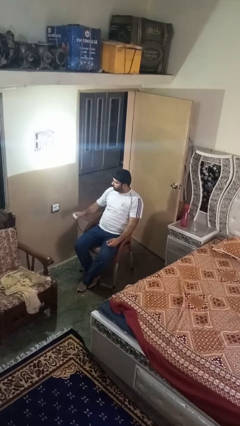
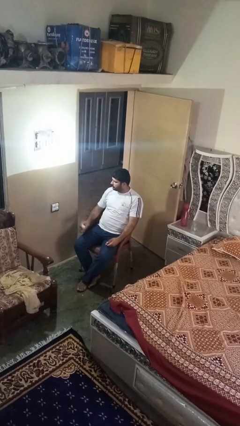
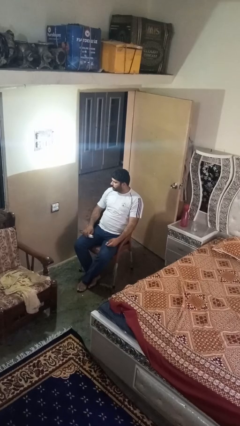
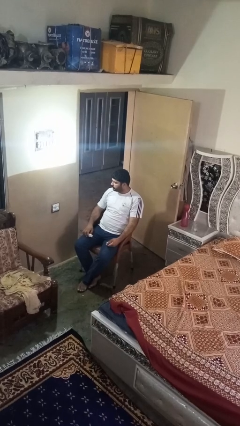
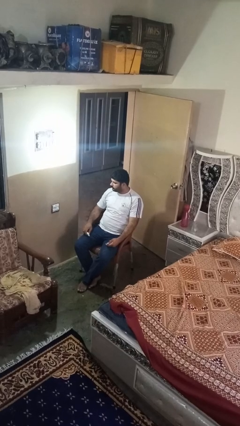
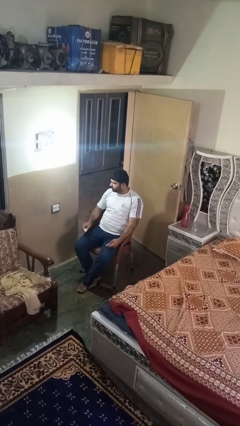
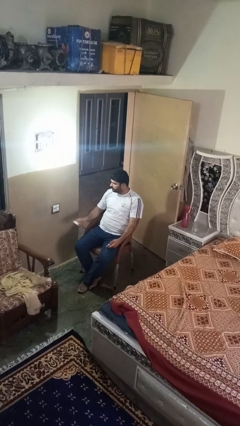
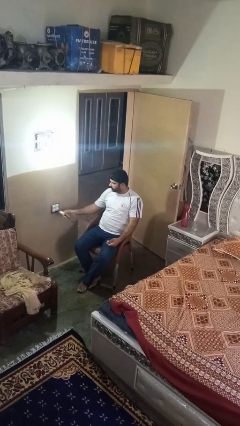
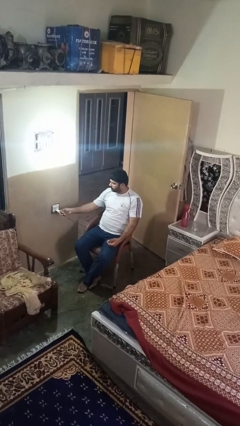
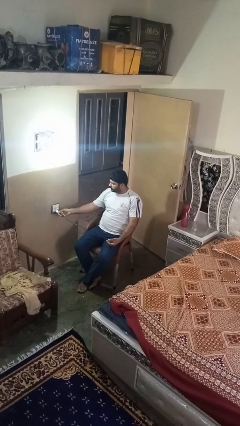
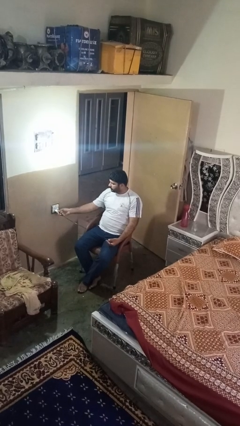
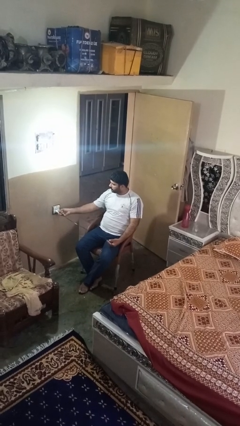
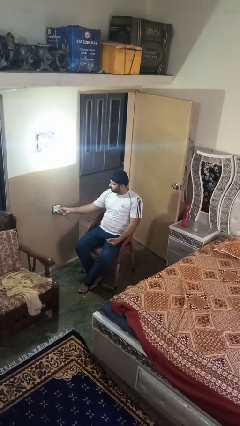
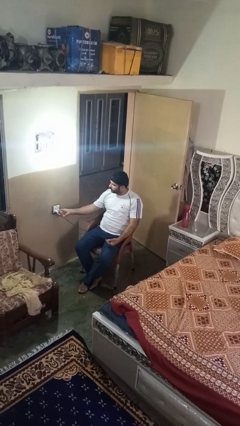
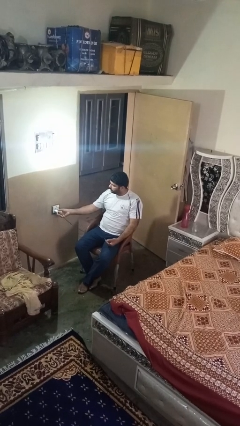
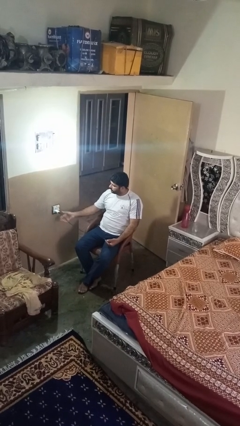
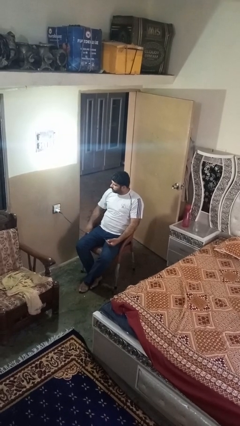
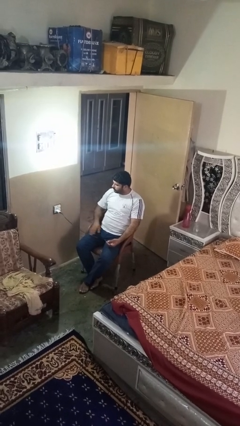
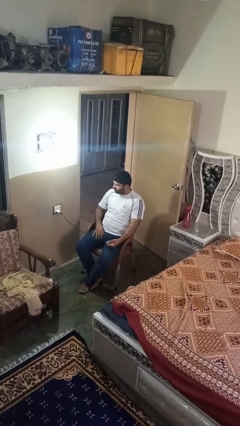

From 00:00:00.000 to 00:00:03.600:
person plugs into electrical socket

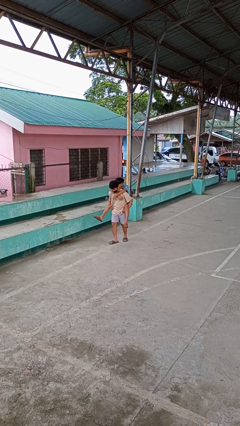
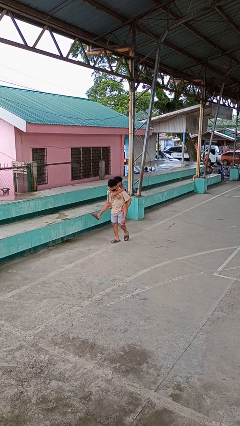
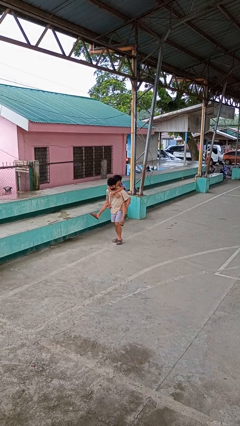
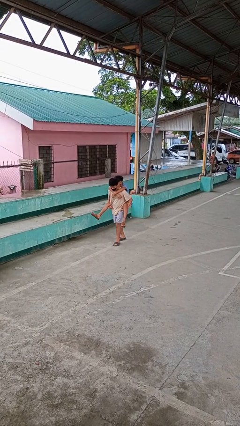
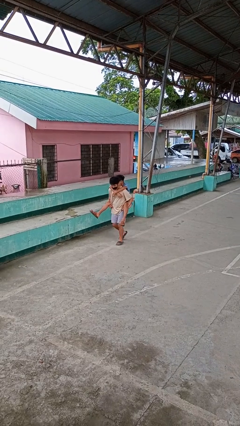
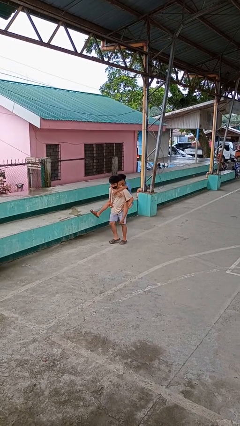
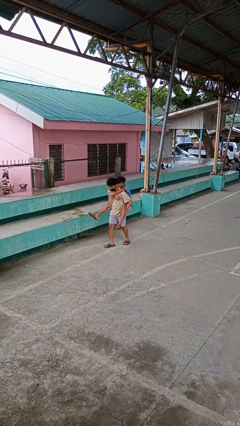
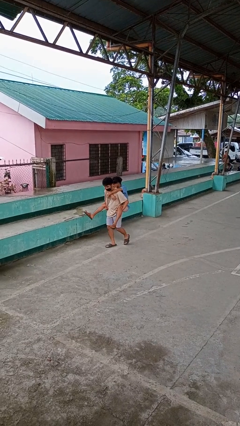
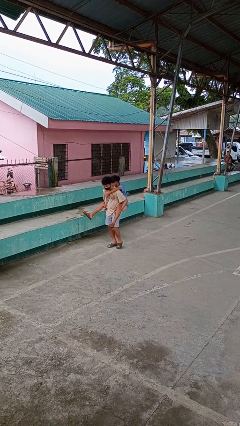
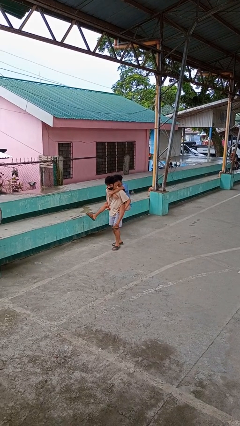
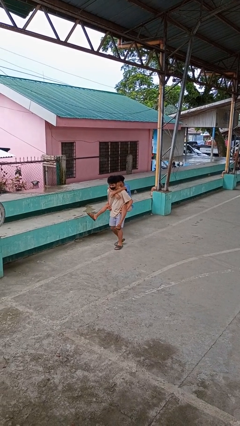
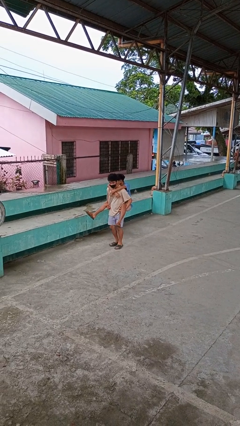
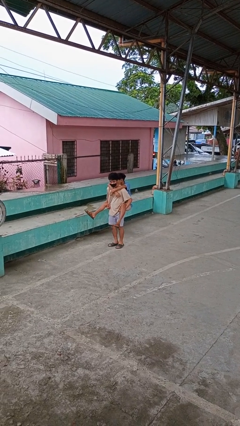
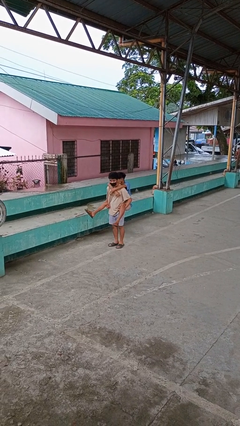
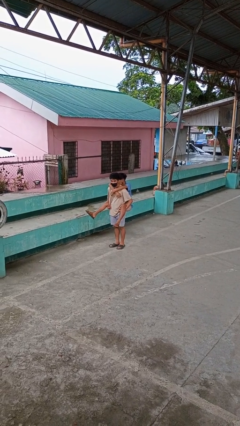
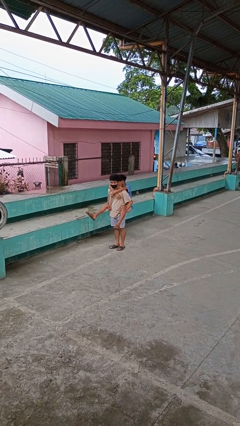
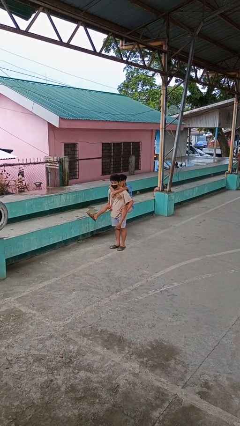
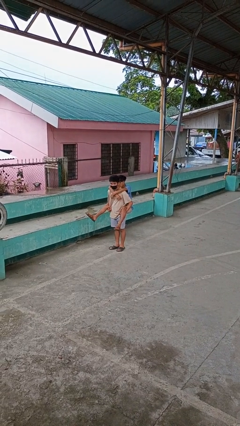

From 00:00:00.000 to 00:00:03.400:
person carries person on back

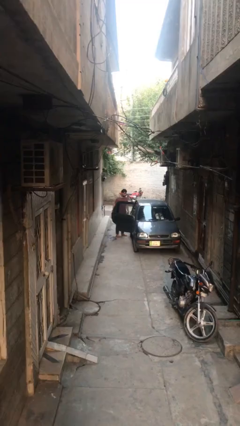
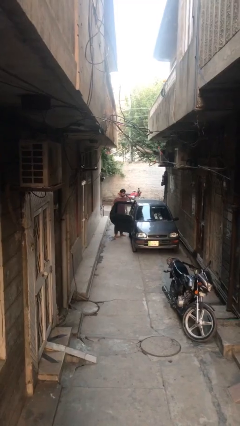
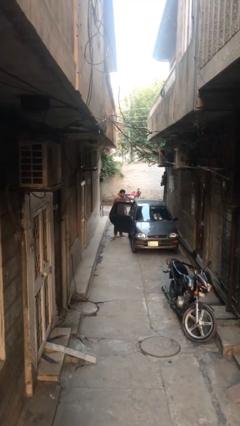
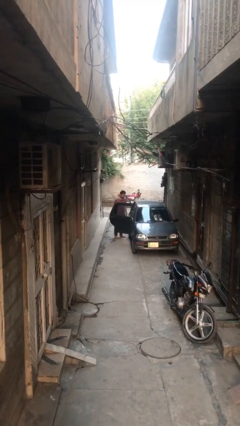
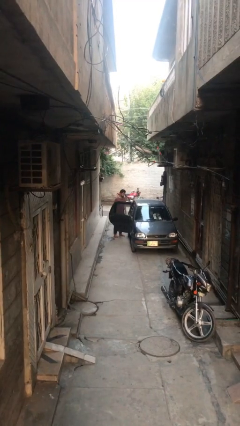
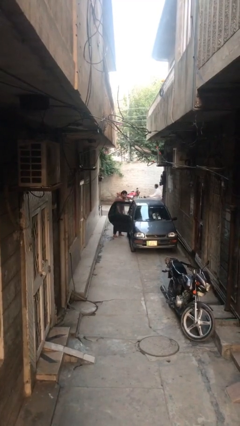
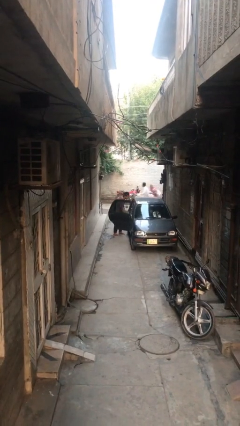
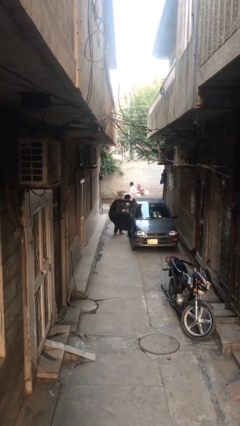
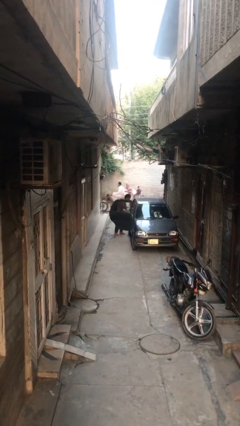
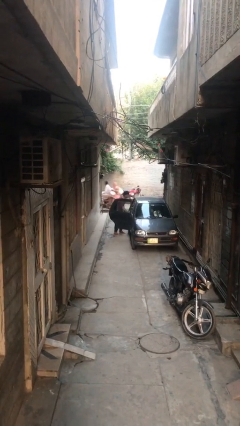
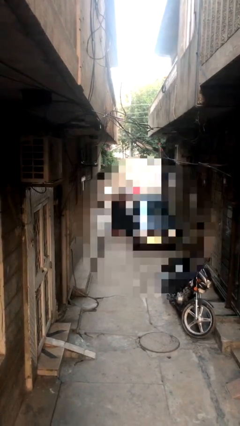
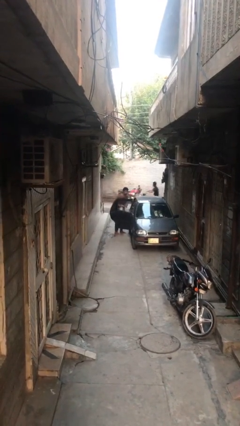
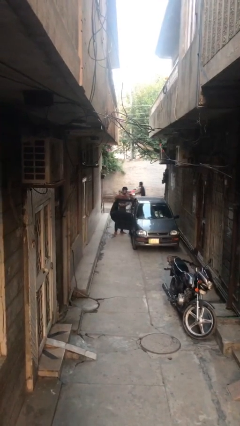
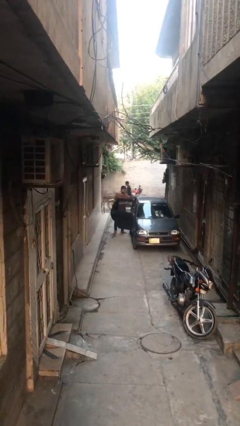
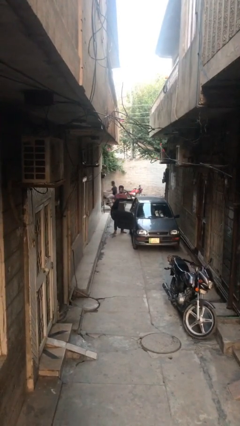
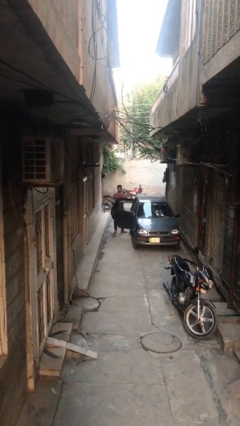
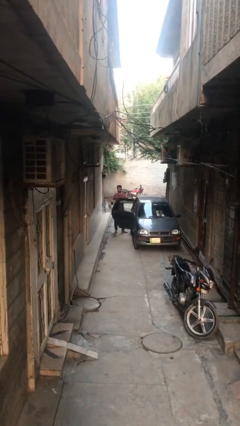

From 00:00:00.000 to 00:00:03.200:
person unloads car

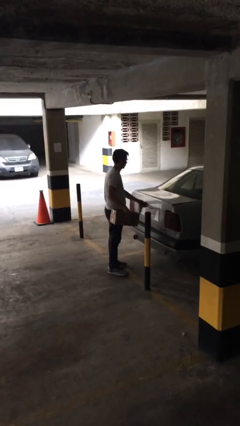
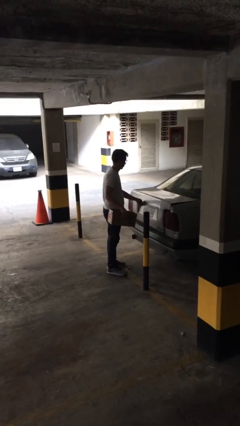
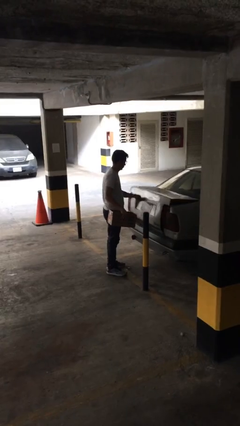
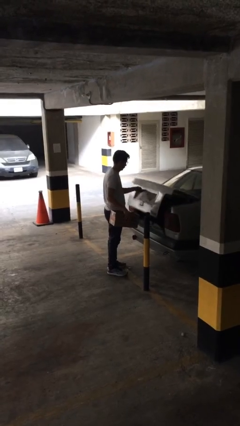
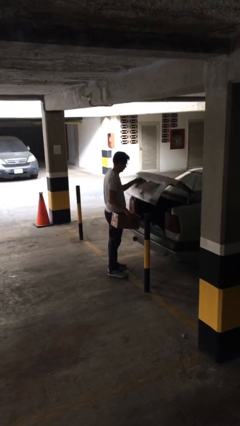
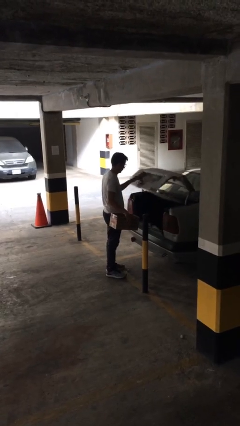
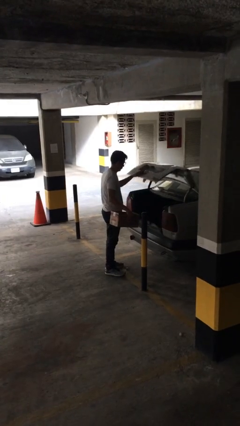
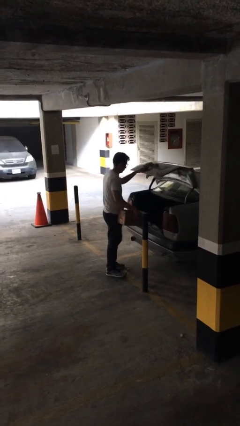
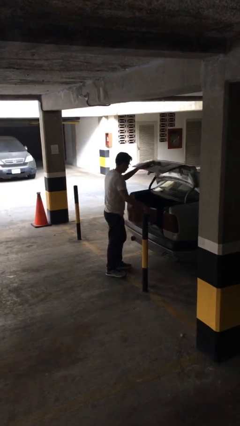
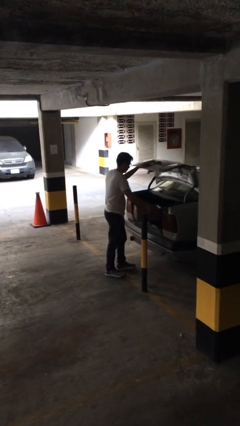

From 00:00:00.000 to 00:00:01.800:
person opens car trunk

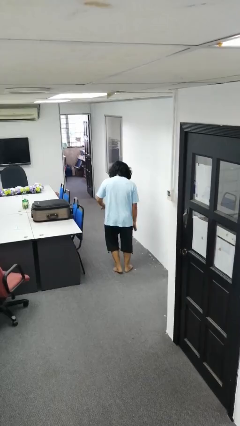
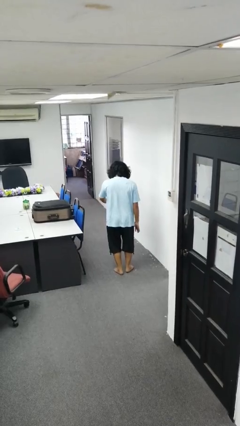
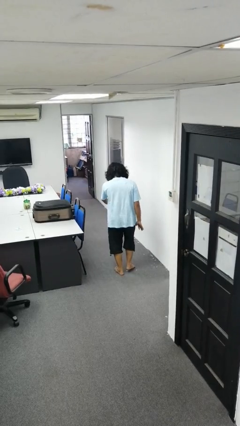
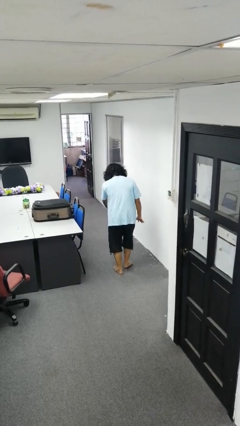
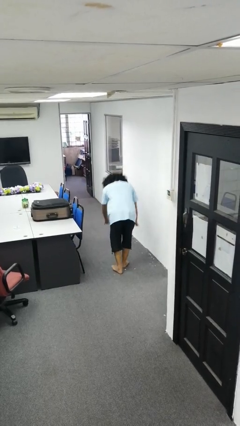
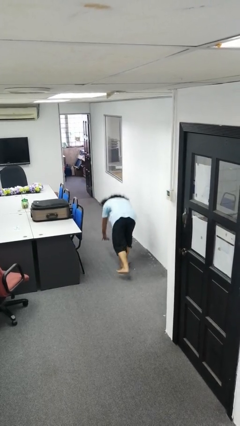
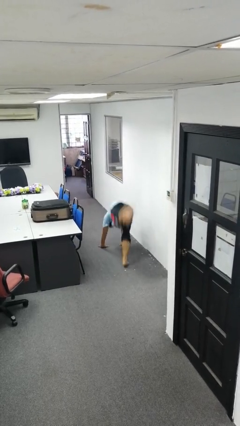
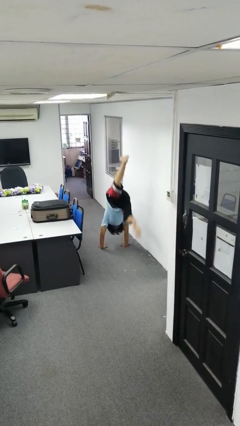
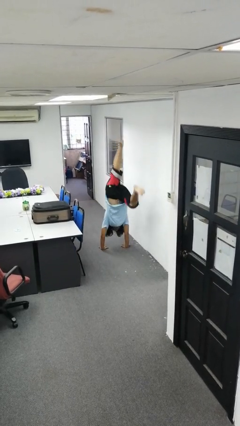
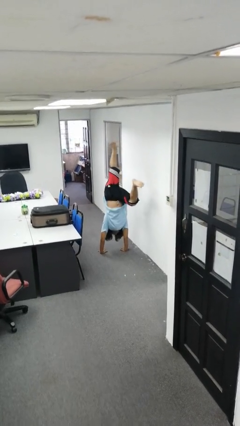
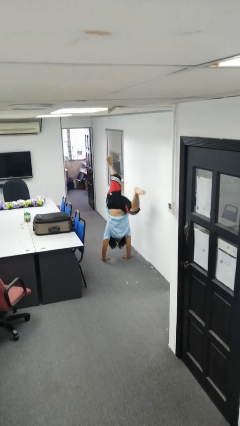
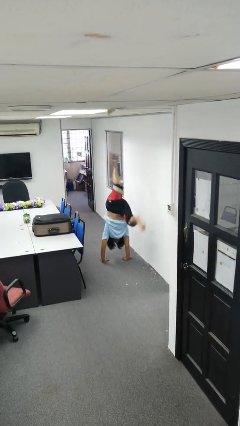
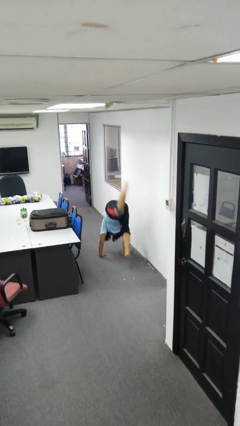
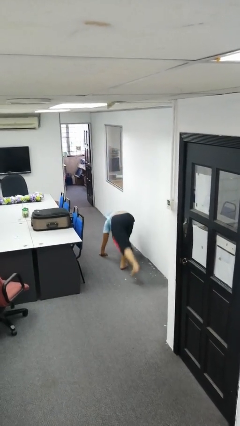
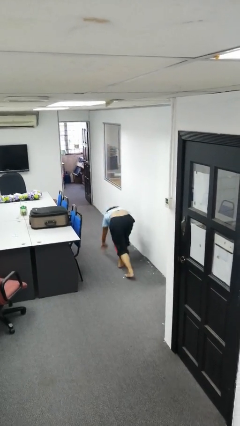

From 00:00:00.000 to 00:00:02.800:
person handstand

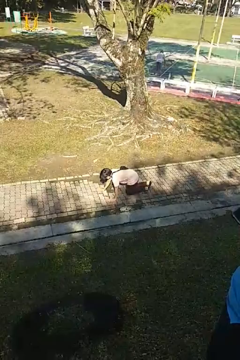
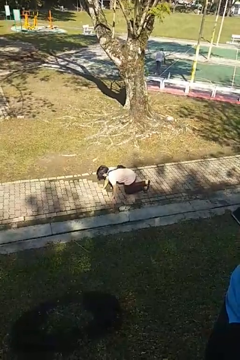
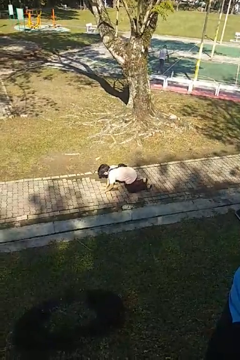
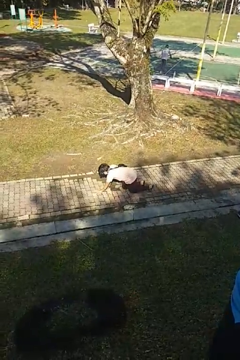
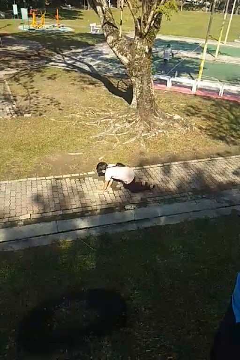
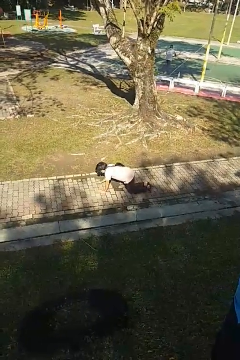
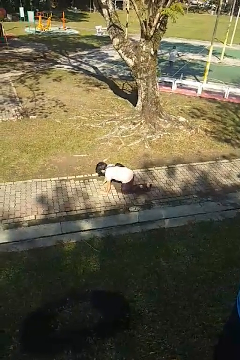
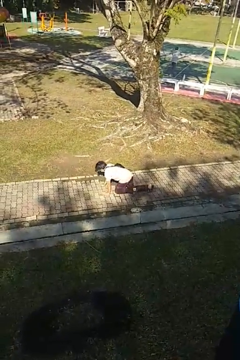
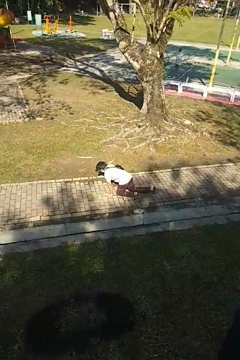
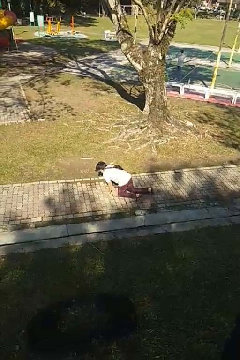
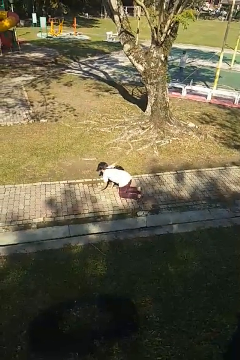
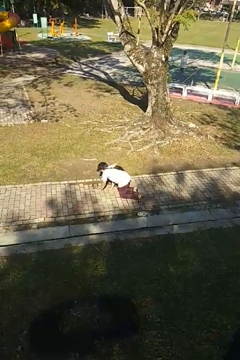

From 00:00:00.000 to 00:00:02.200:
person crawls

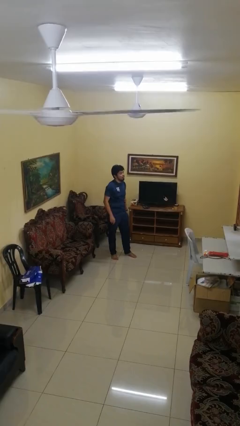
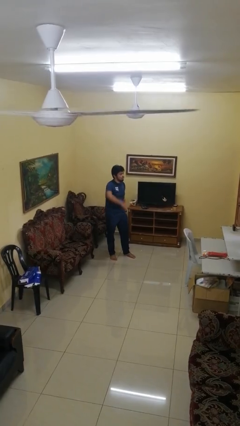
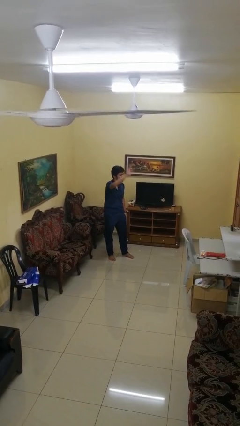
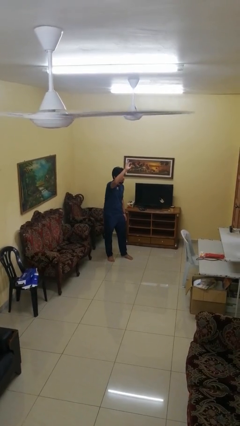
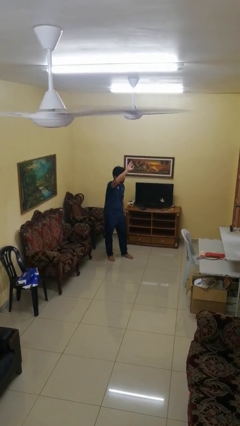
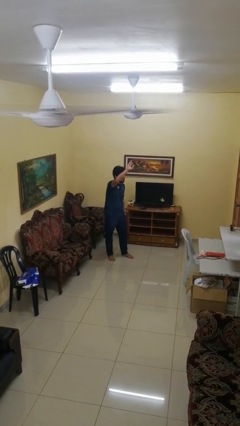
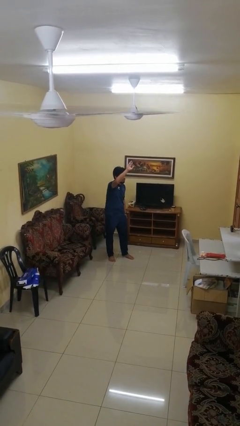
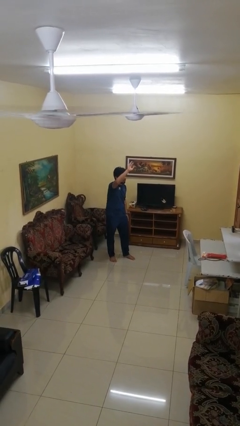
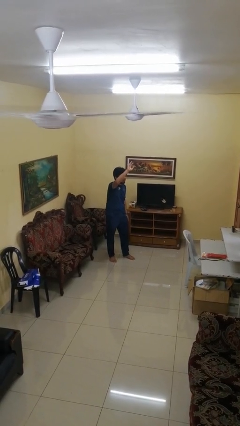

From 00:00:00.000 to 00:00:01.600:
person gestures swipe up
